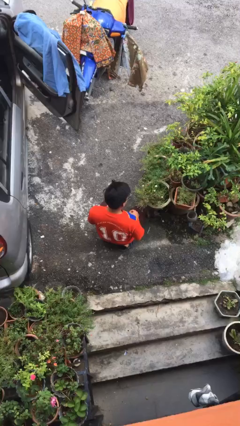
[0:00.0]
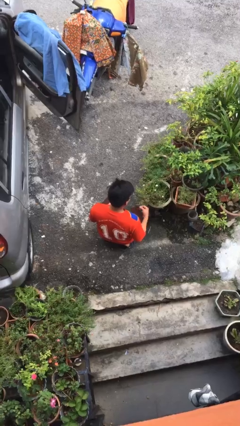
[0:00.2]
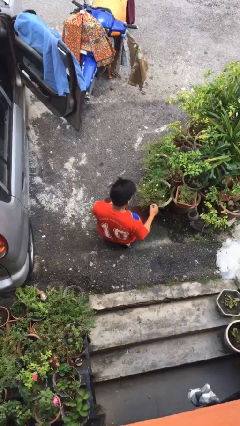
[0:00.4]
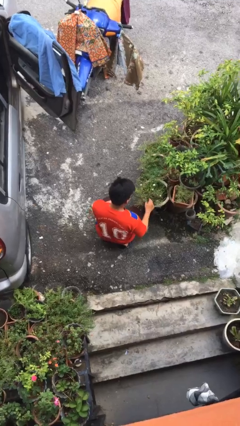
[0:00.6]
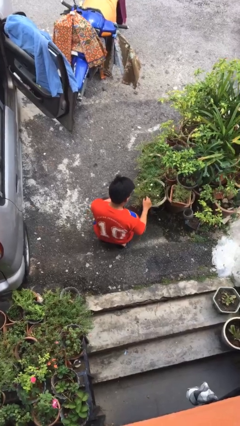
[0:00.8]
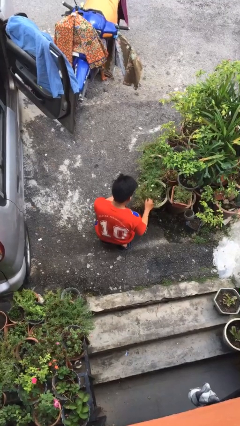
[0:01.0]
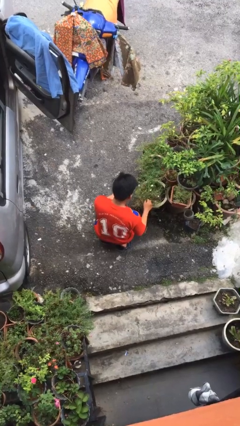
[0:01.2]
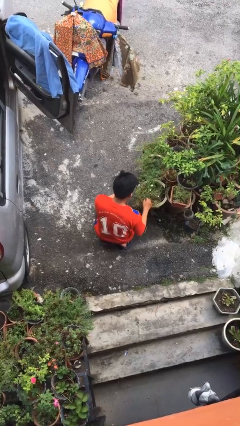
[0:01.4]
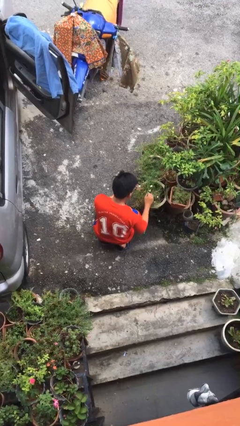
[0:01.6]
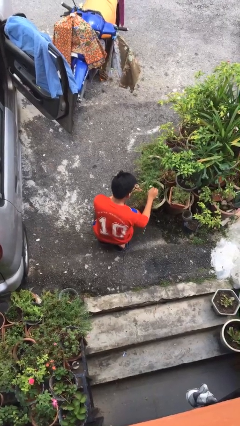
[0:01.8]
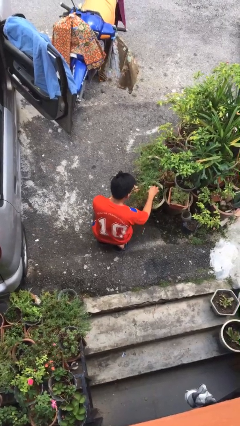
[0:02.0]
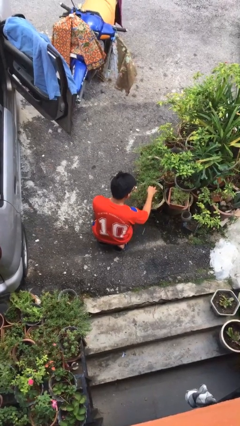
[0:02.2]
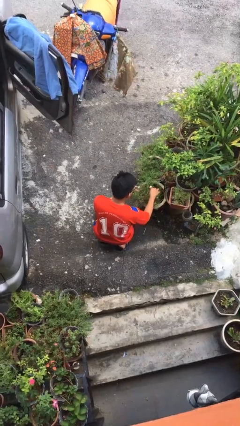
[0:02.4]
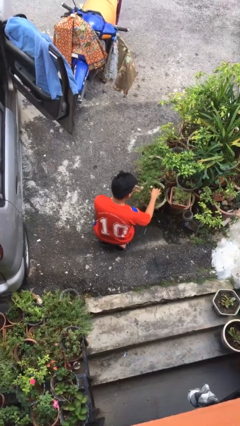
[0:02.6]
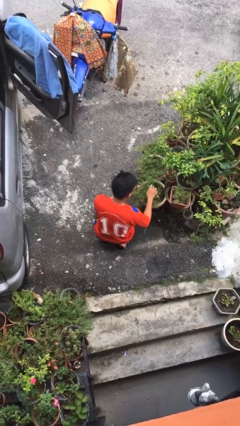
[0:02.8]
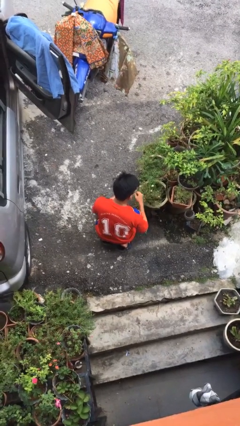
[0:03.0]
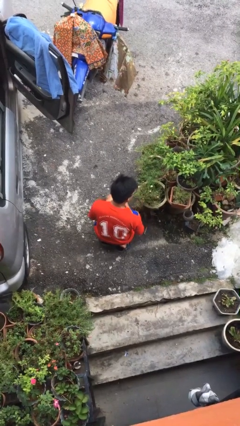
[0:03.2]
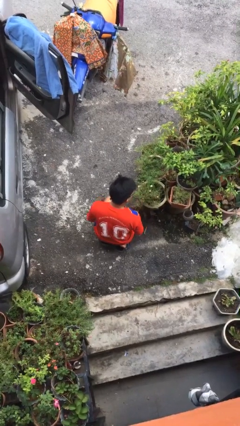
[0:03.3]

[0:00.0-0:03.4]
person arranges flowers in vase

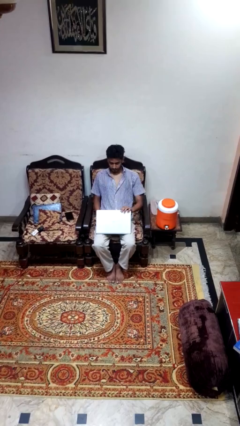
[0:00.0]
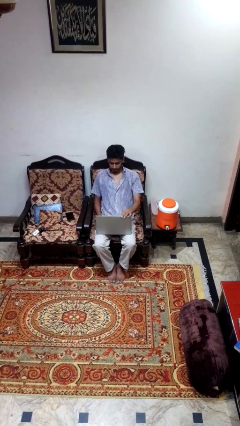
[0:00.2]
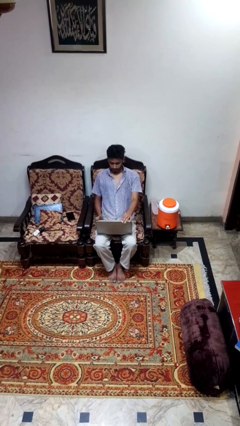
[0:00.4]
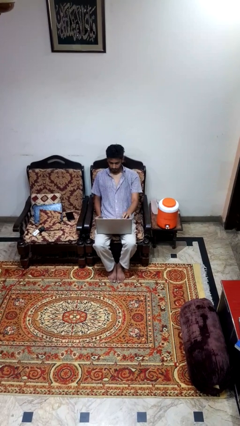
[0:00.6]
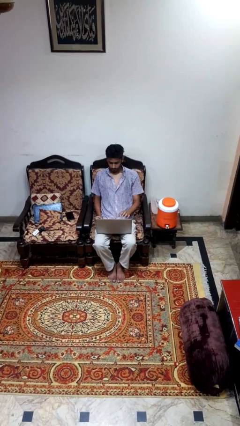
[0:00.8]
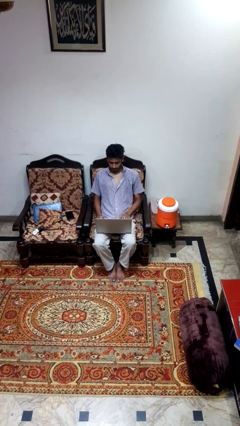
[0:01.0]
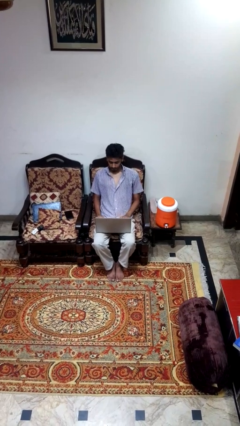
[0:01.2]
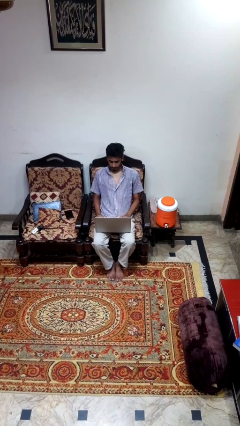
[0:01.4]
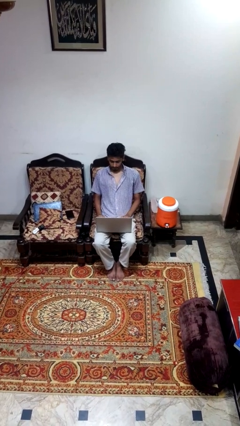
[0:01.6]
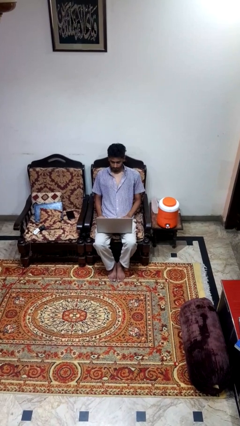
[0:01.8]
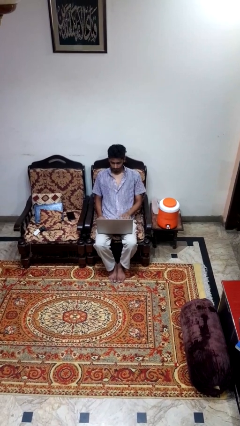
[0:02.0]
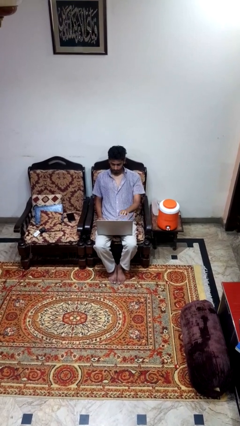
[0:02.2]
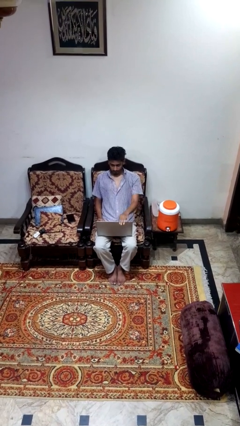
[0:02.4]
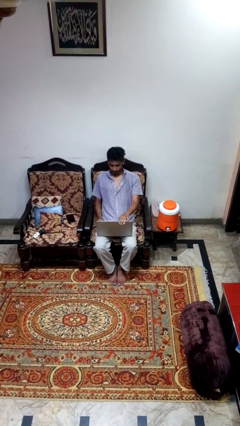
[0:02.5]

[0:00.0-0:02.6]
person opens laptop

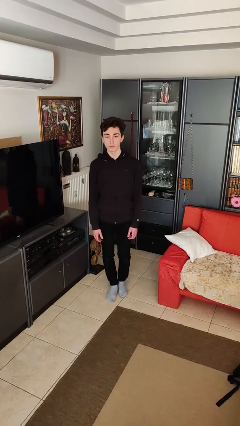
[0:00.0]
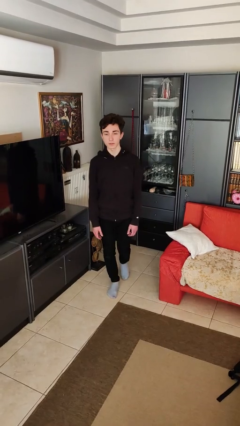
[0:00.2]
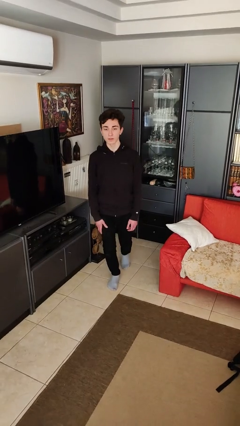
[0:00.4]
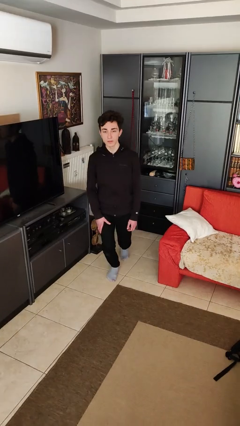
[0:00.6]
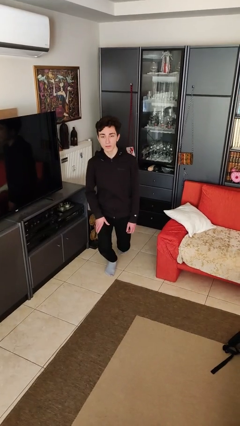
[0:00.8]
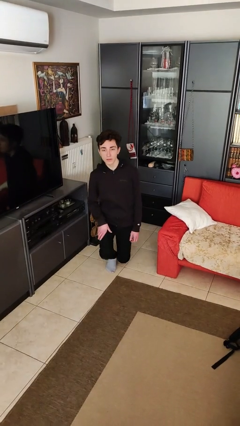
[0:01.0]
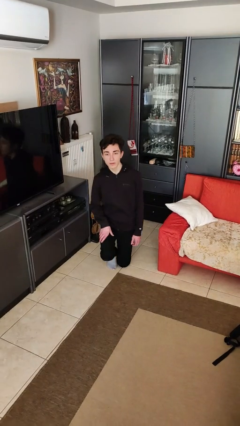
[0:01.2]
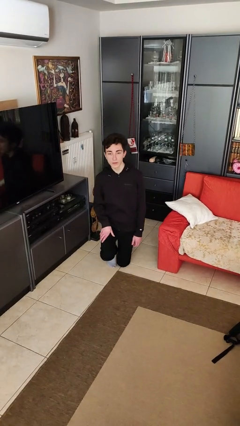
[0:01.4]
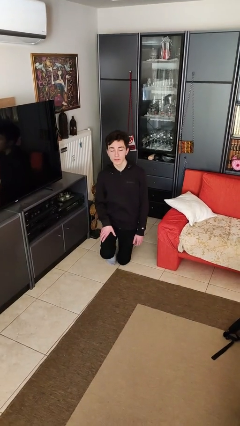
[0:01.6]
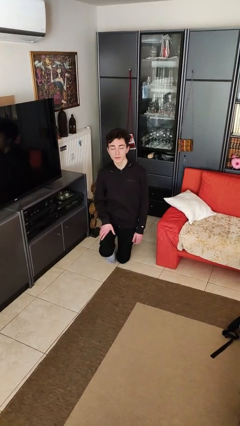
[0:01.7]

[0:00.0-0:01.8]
person kneels

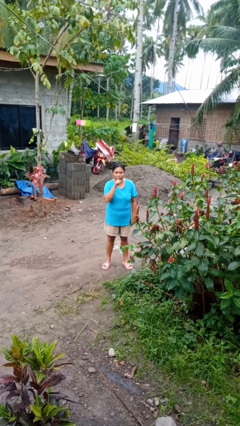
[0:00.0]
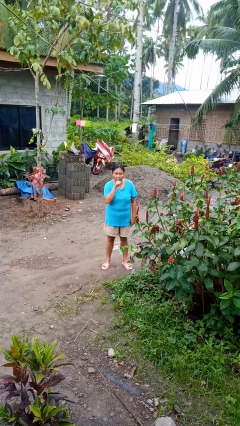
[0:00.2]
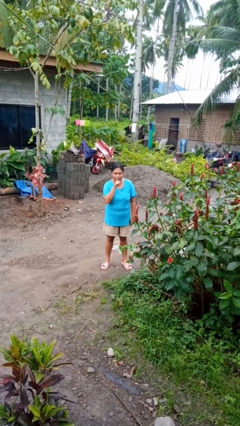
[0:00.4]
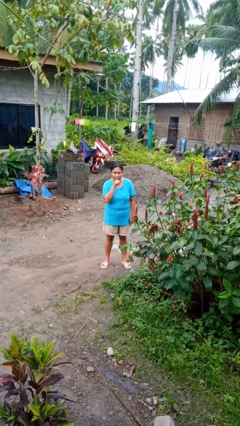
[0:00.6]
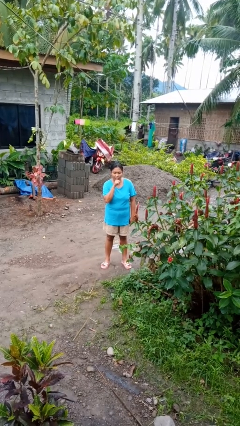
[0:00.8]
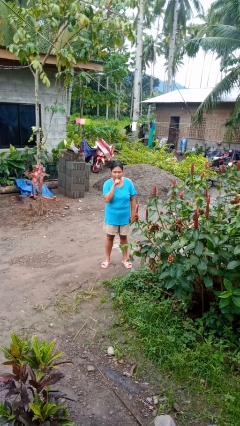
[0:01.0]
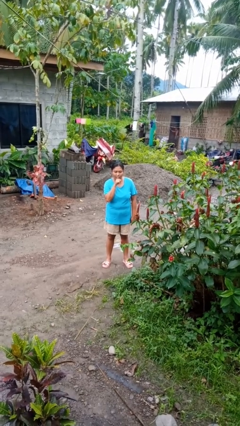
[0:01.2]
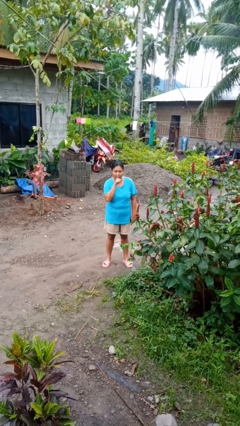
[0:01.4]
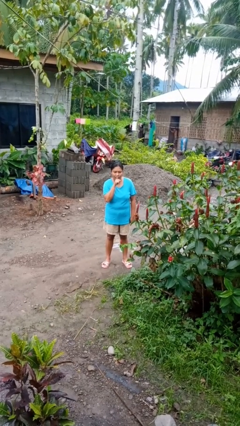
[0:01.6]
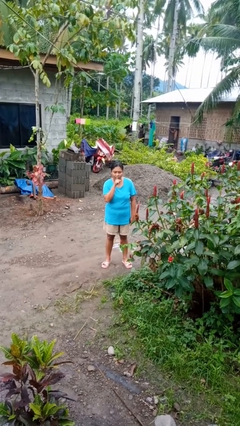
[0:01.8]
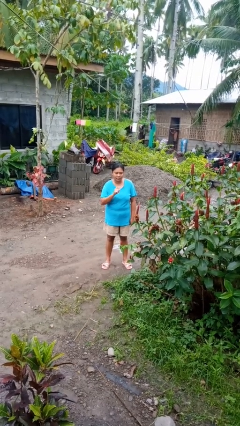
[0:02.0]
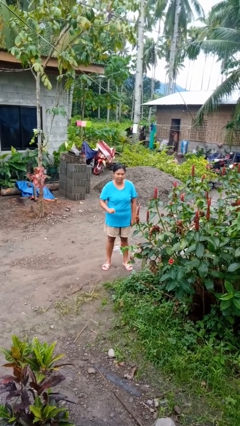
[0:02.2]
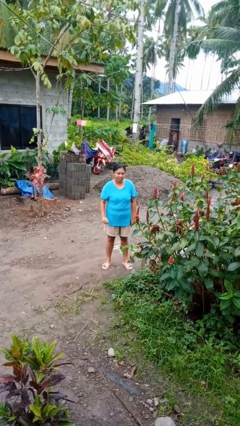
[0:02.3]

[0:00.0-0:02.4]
person gestures be quiet

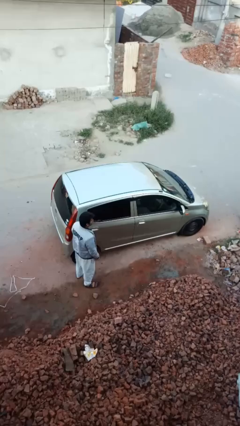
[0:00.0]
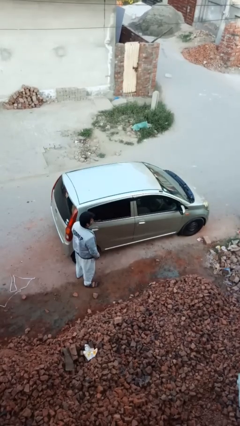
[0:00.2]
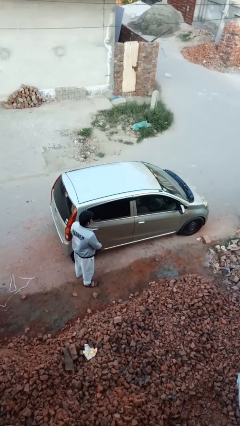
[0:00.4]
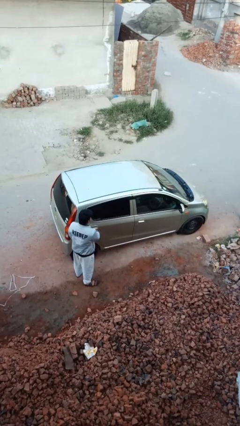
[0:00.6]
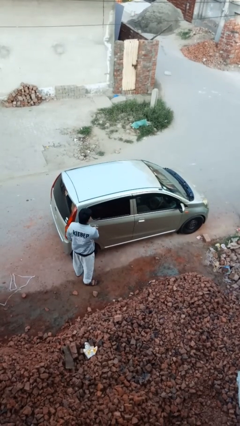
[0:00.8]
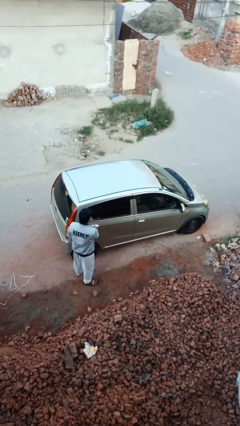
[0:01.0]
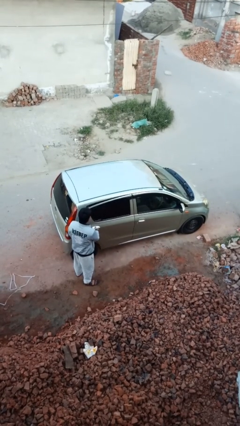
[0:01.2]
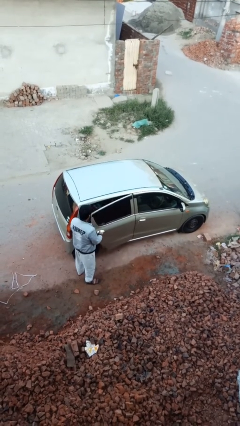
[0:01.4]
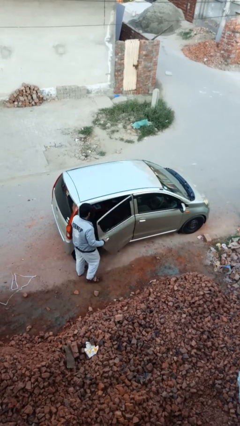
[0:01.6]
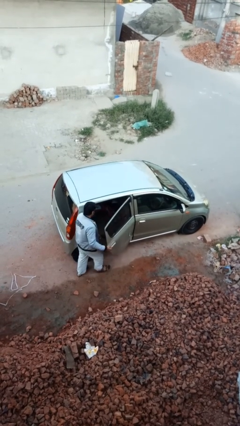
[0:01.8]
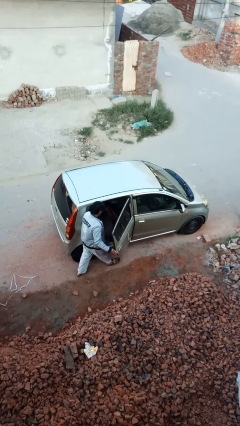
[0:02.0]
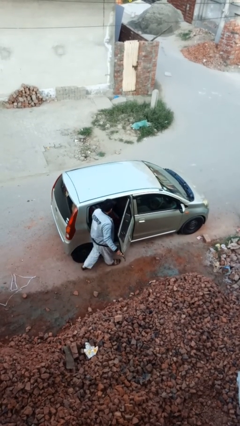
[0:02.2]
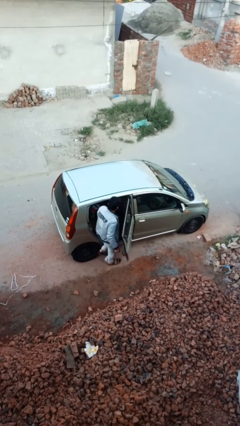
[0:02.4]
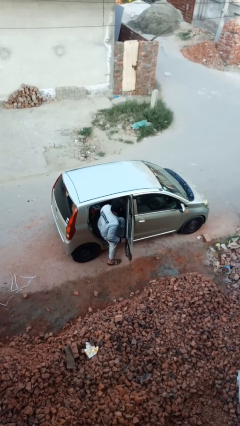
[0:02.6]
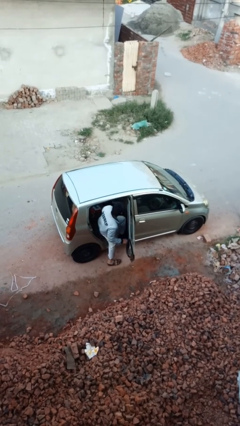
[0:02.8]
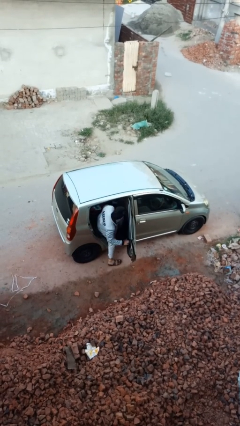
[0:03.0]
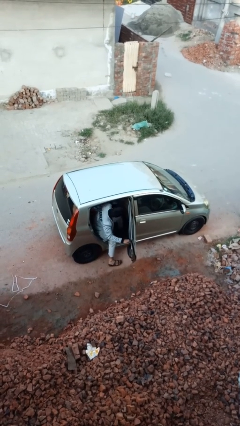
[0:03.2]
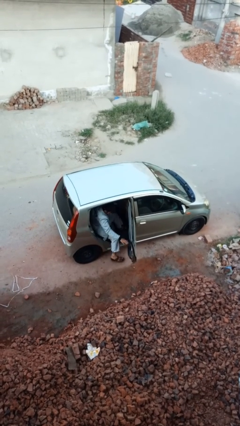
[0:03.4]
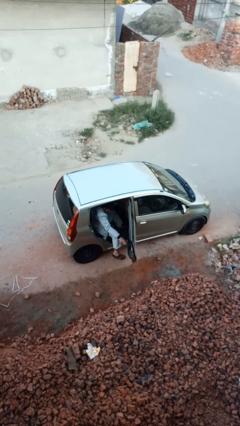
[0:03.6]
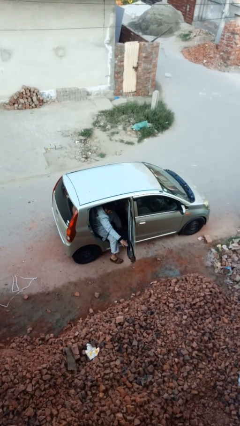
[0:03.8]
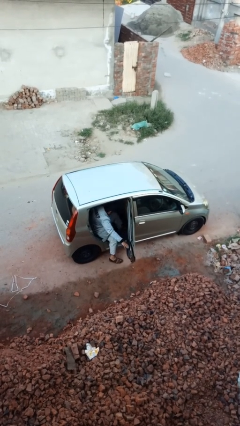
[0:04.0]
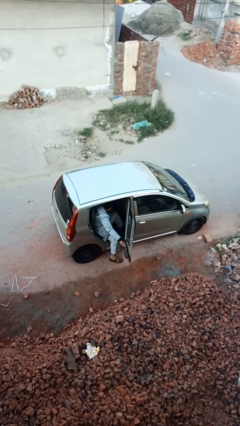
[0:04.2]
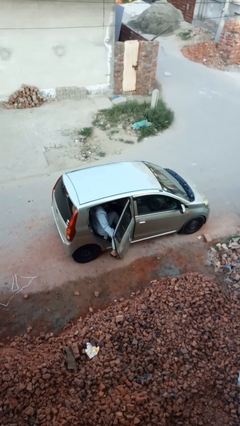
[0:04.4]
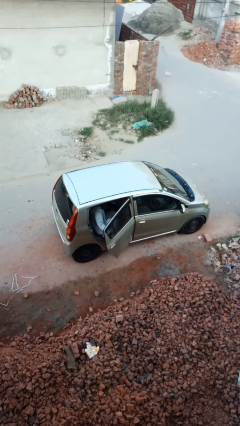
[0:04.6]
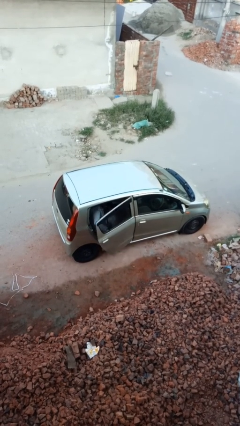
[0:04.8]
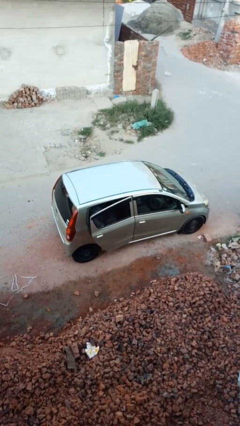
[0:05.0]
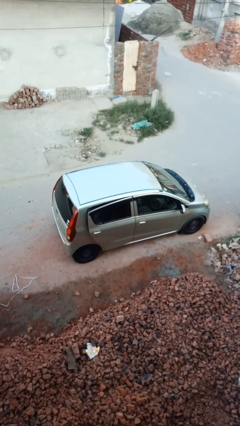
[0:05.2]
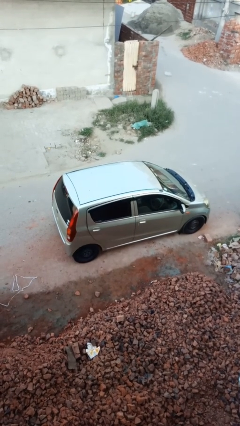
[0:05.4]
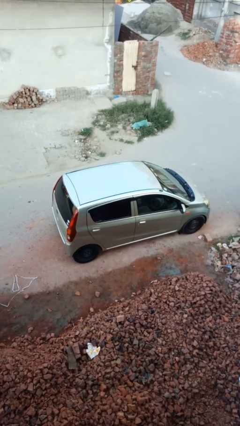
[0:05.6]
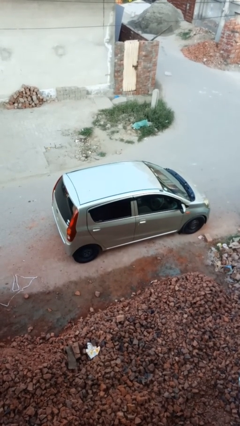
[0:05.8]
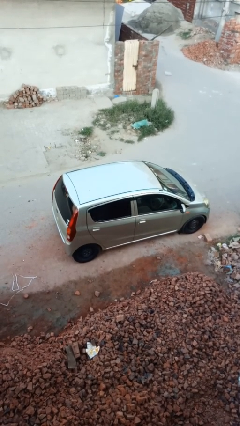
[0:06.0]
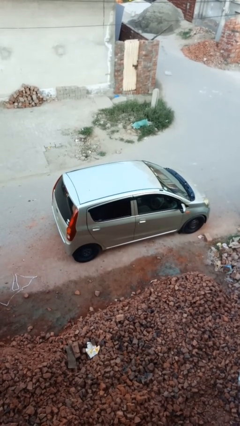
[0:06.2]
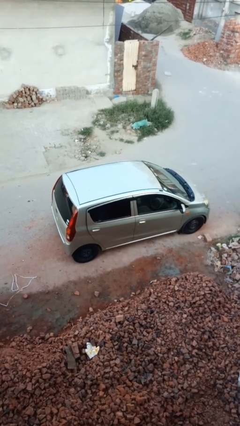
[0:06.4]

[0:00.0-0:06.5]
car picks up person

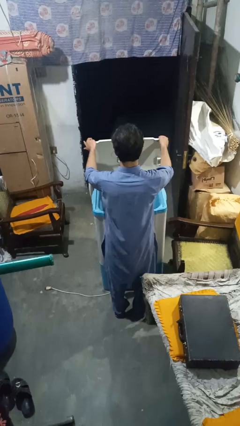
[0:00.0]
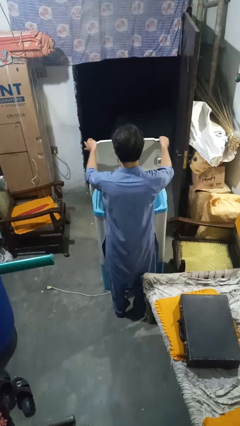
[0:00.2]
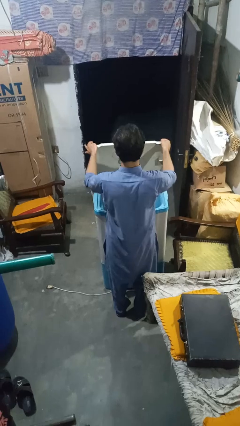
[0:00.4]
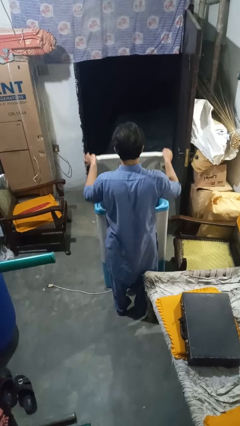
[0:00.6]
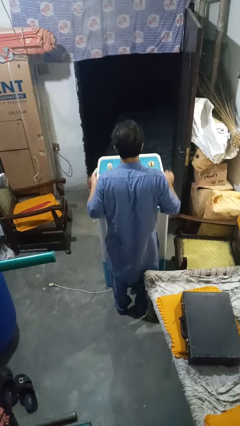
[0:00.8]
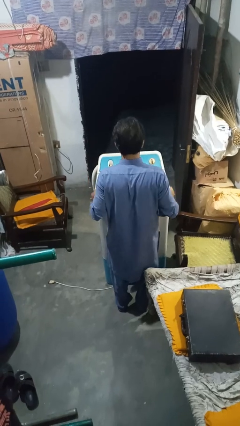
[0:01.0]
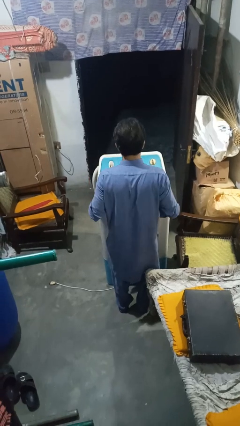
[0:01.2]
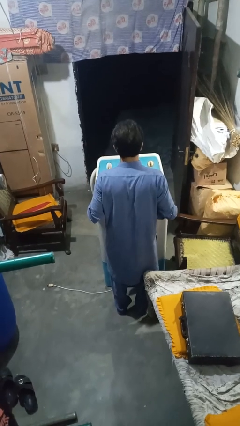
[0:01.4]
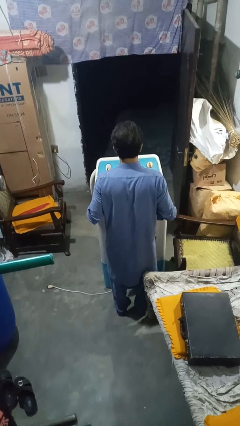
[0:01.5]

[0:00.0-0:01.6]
person closes clothes washer
